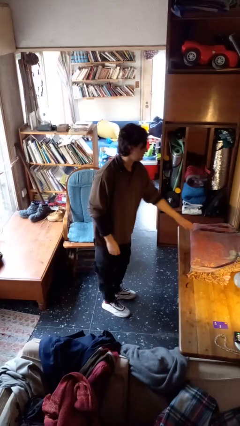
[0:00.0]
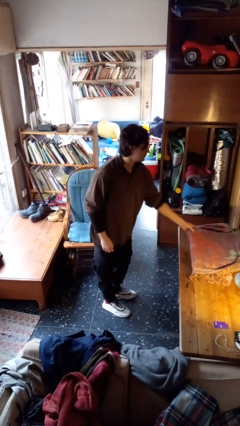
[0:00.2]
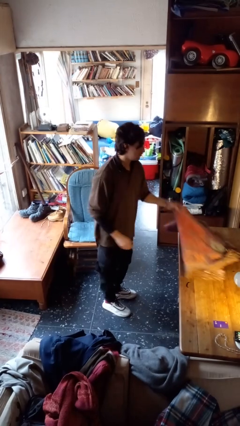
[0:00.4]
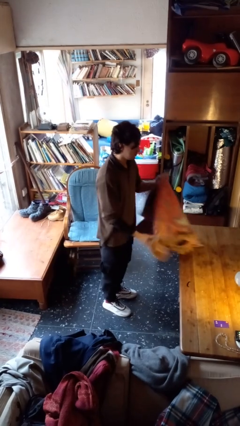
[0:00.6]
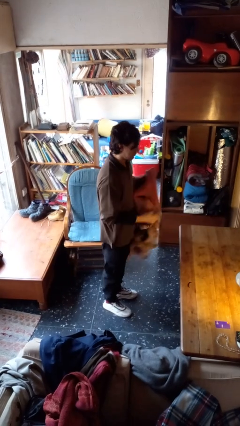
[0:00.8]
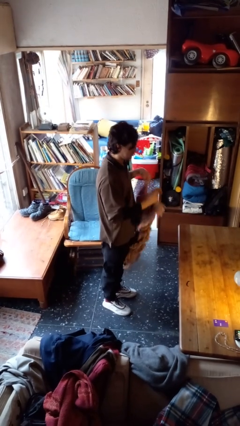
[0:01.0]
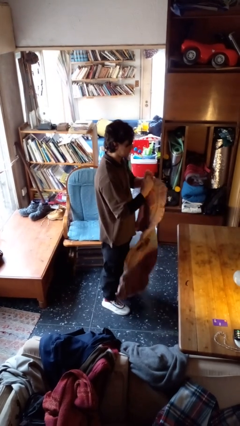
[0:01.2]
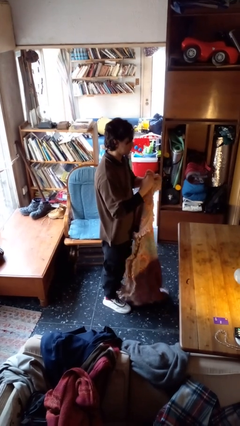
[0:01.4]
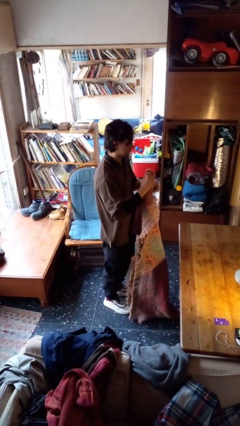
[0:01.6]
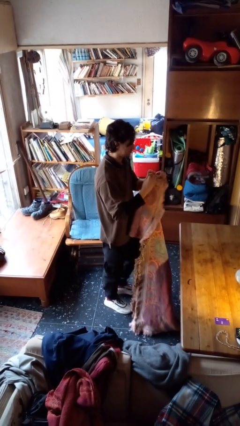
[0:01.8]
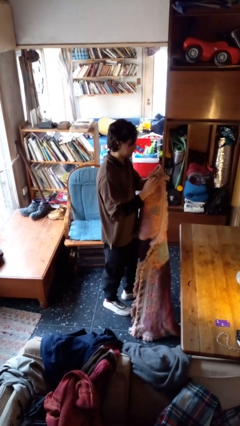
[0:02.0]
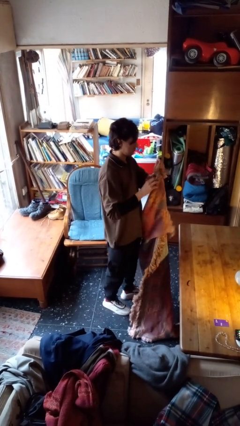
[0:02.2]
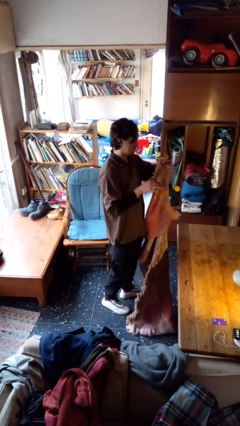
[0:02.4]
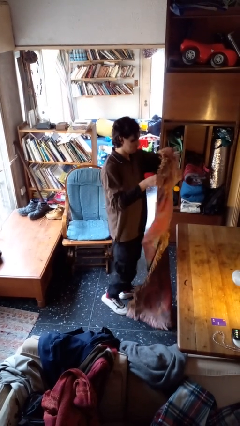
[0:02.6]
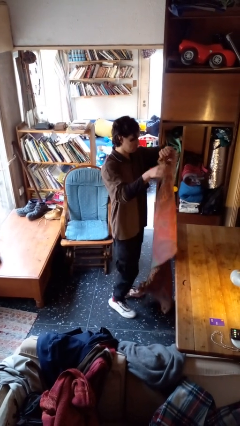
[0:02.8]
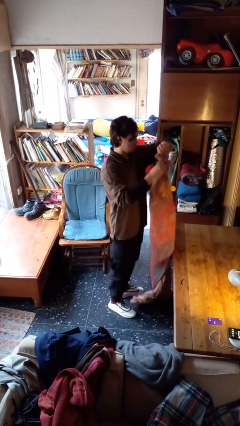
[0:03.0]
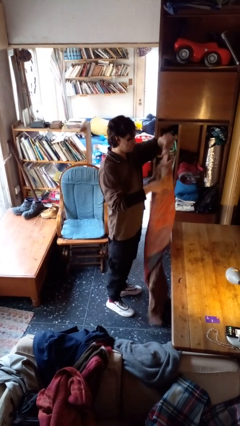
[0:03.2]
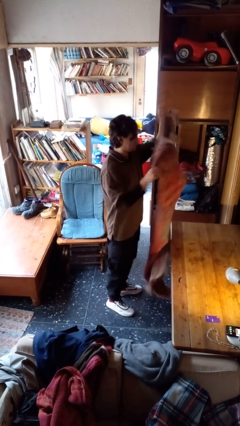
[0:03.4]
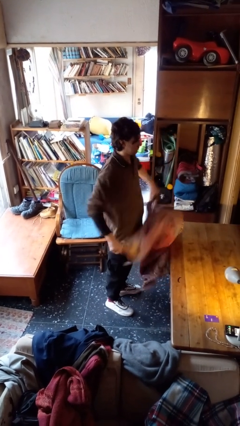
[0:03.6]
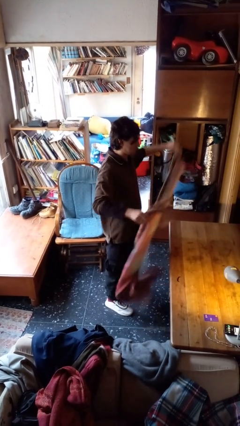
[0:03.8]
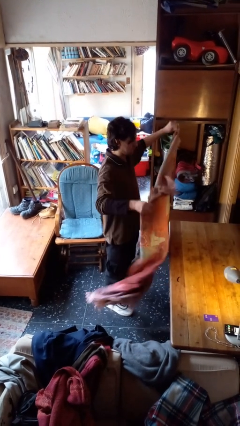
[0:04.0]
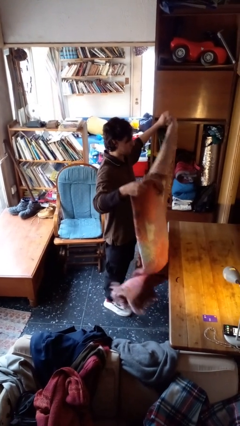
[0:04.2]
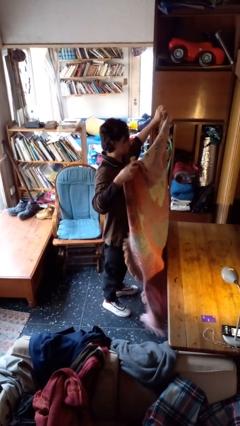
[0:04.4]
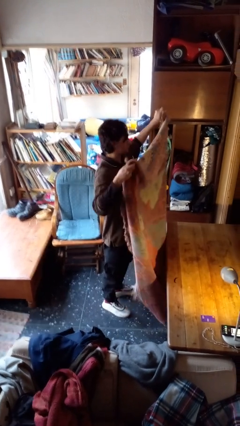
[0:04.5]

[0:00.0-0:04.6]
person unfolds blanket

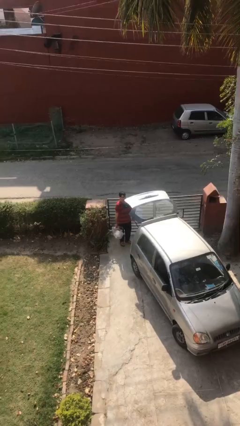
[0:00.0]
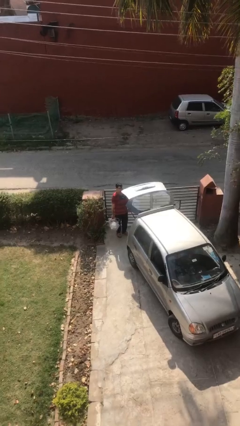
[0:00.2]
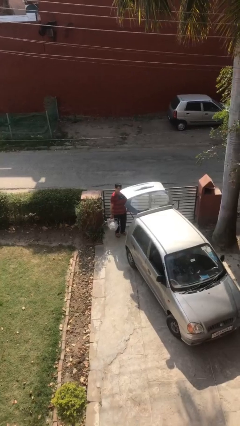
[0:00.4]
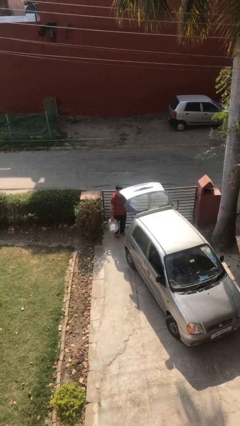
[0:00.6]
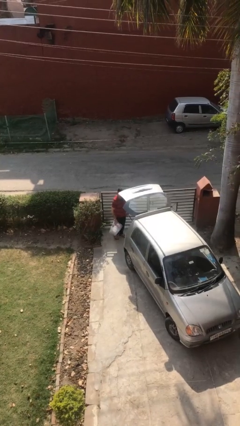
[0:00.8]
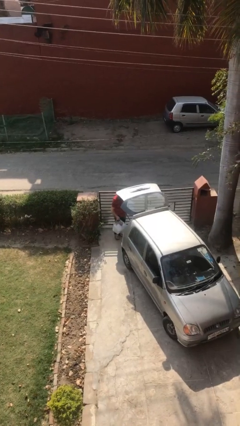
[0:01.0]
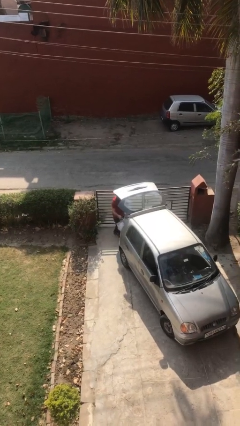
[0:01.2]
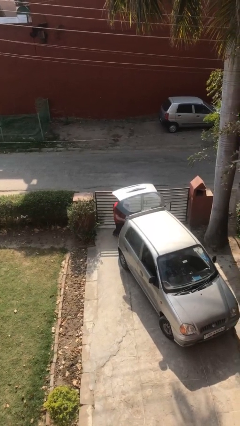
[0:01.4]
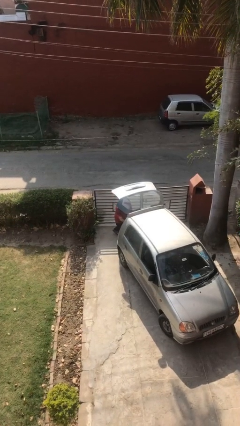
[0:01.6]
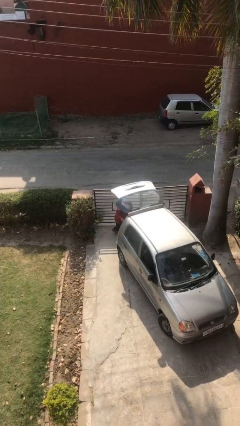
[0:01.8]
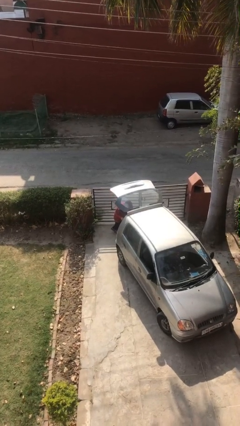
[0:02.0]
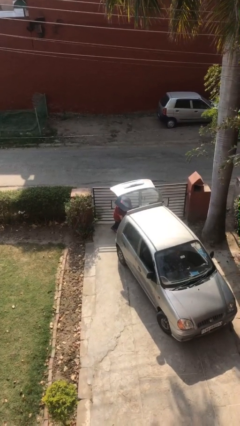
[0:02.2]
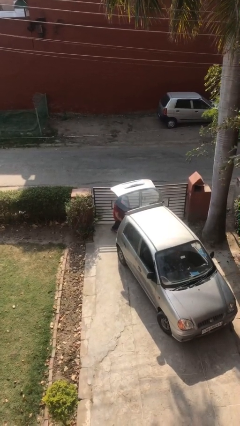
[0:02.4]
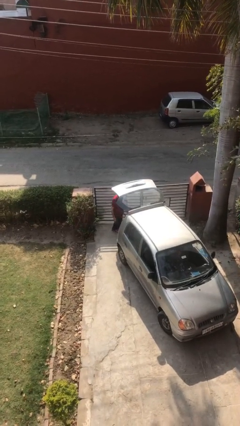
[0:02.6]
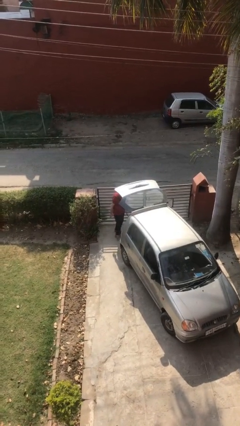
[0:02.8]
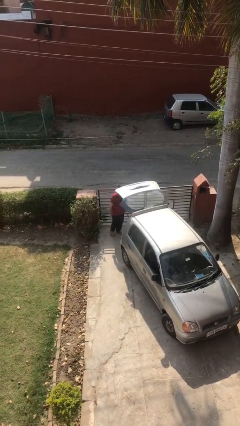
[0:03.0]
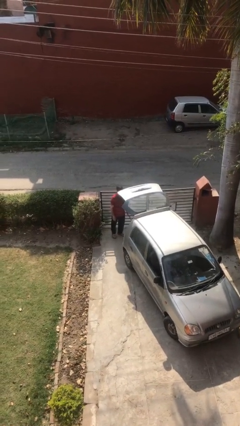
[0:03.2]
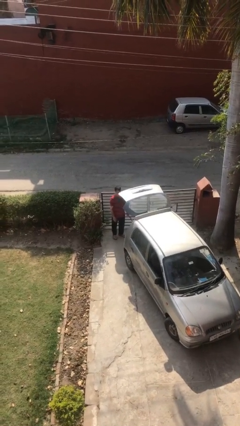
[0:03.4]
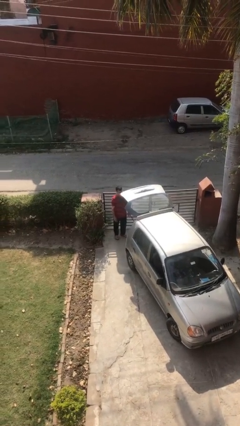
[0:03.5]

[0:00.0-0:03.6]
person loads car

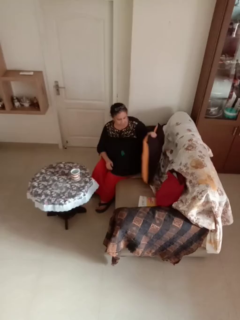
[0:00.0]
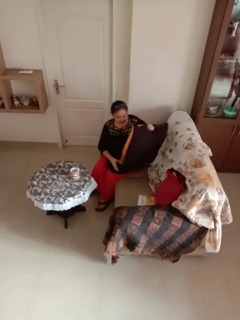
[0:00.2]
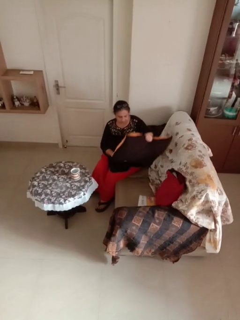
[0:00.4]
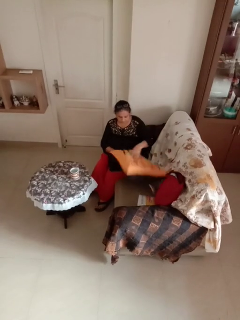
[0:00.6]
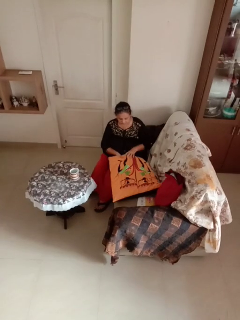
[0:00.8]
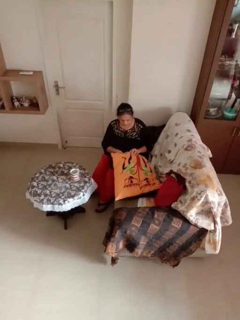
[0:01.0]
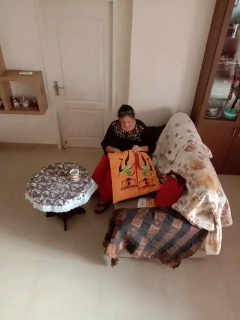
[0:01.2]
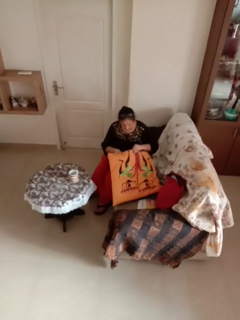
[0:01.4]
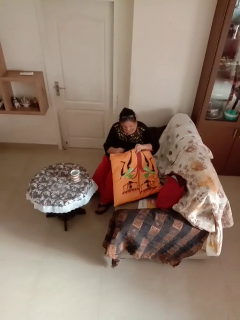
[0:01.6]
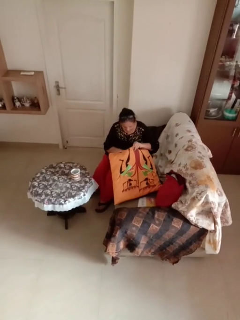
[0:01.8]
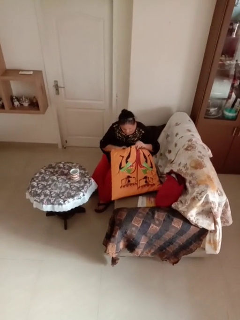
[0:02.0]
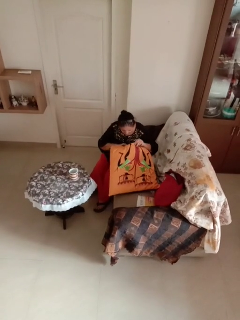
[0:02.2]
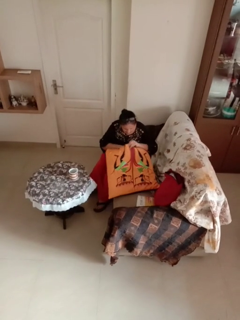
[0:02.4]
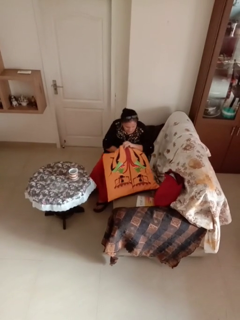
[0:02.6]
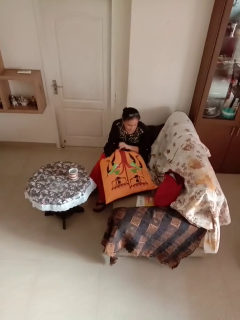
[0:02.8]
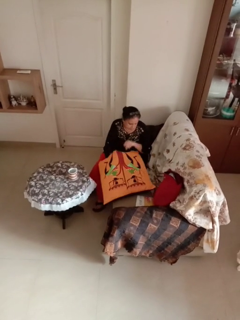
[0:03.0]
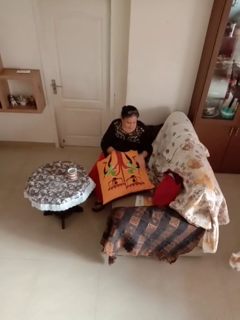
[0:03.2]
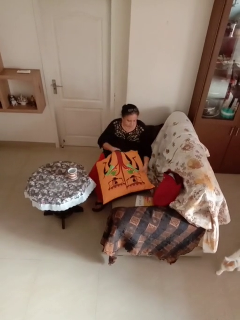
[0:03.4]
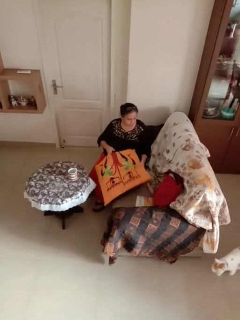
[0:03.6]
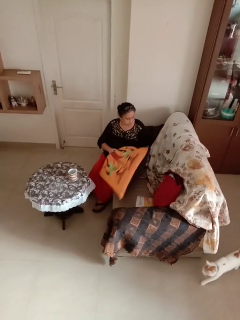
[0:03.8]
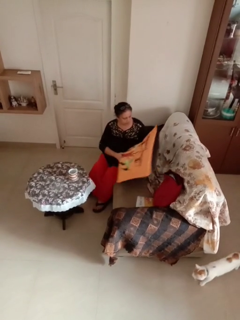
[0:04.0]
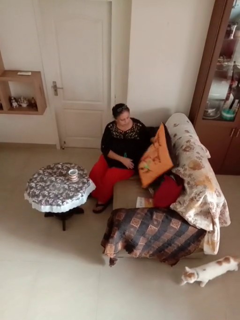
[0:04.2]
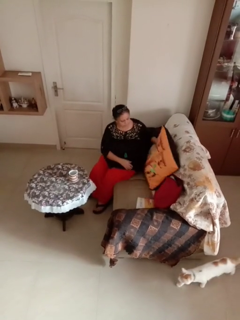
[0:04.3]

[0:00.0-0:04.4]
person searches in couch

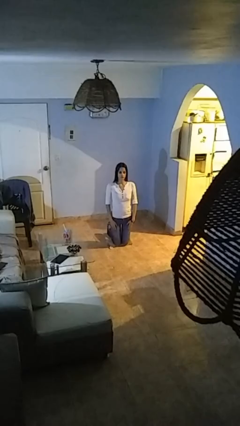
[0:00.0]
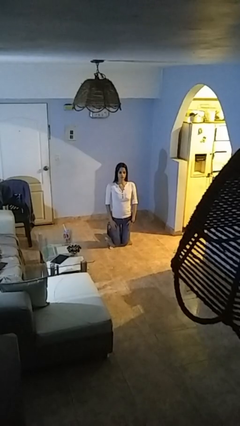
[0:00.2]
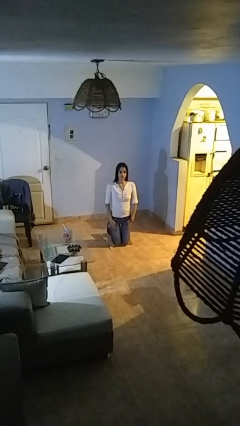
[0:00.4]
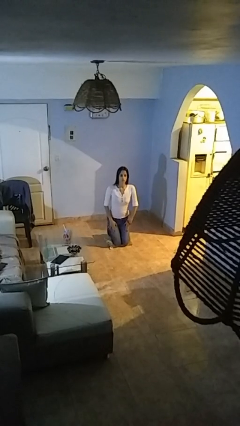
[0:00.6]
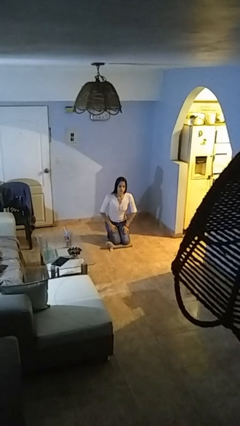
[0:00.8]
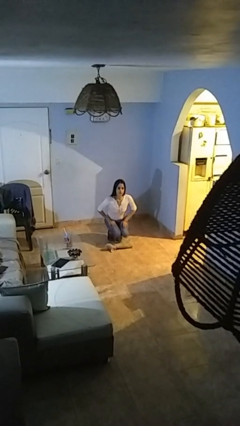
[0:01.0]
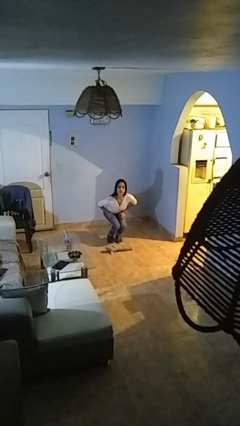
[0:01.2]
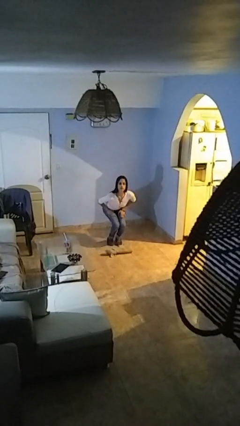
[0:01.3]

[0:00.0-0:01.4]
person stands up from floor

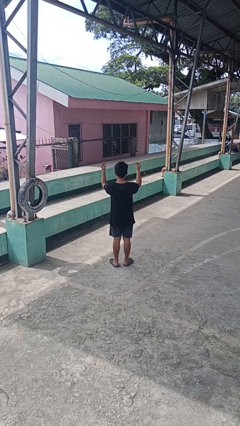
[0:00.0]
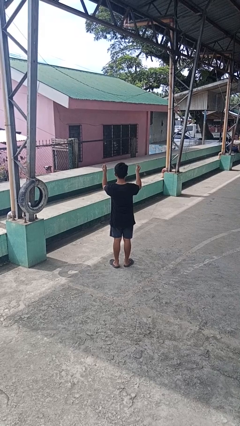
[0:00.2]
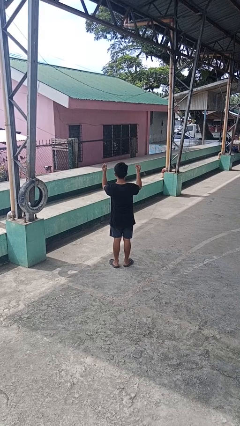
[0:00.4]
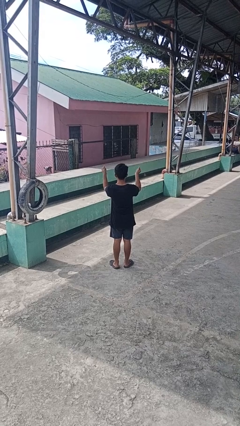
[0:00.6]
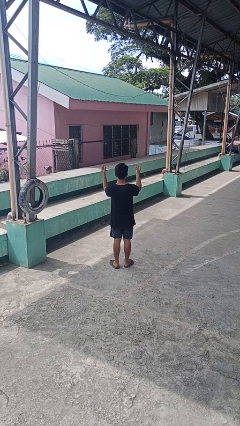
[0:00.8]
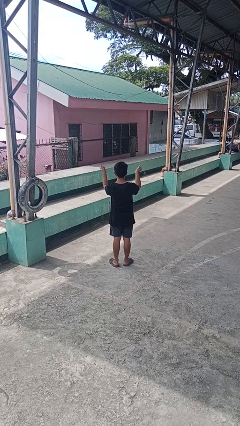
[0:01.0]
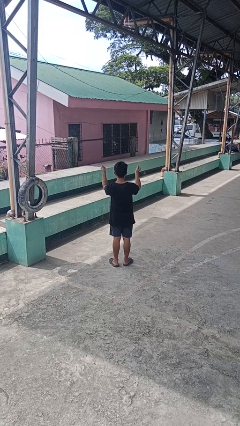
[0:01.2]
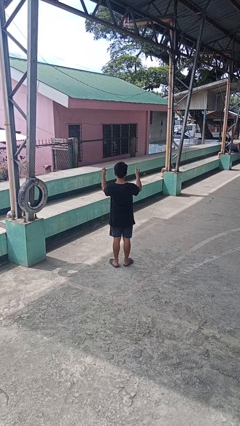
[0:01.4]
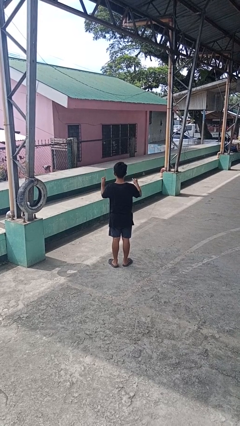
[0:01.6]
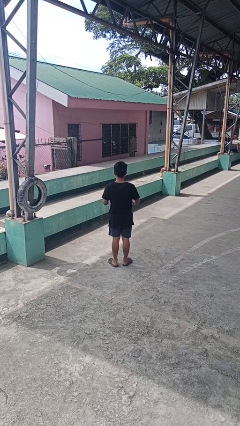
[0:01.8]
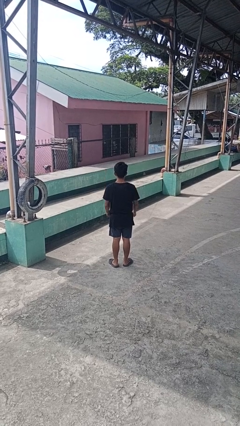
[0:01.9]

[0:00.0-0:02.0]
person snaps fingers

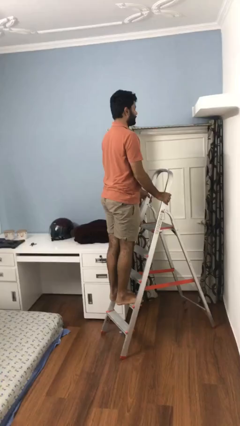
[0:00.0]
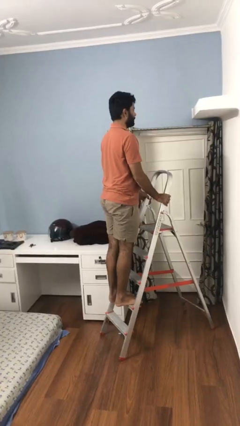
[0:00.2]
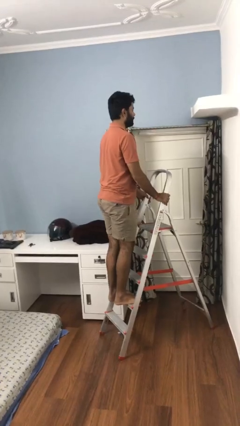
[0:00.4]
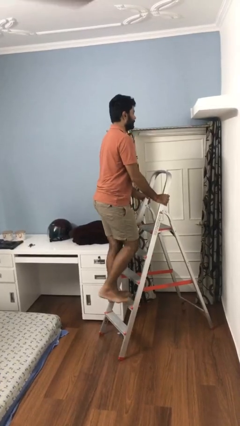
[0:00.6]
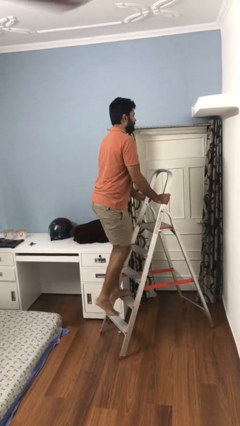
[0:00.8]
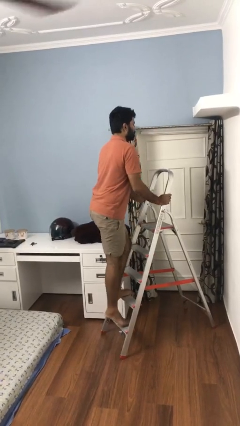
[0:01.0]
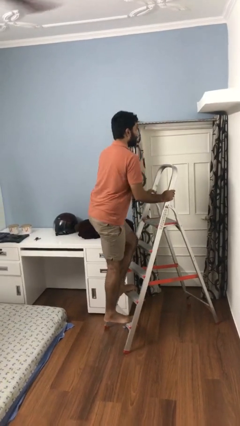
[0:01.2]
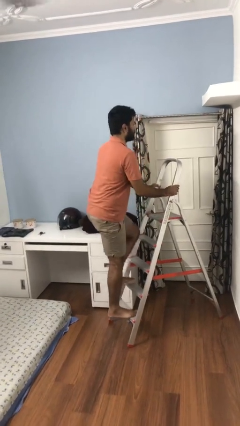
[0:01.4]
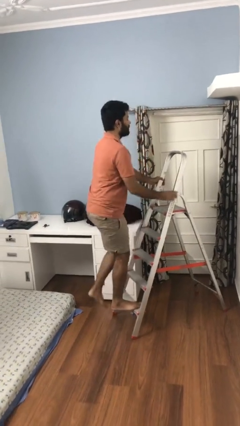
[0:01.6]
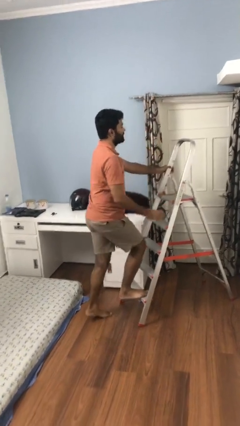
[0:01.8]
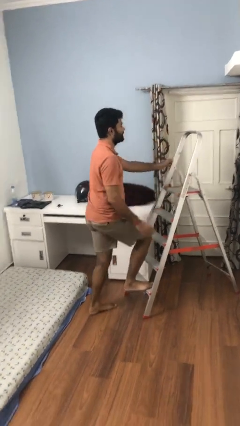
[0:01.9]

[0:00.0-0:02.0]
person climbs down ladder

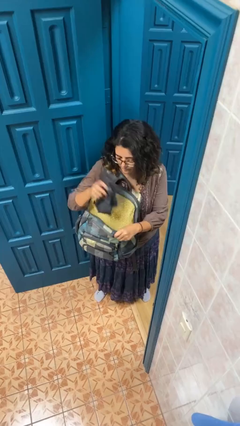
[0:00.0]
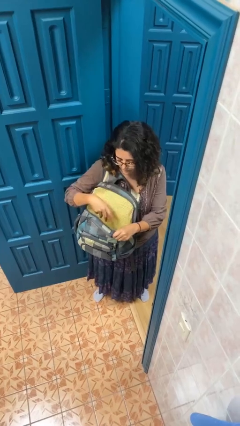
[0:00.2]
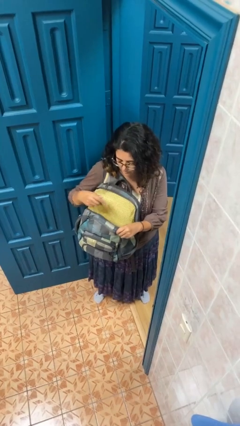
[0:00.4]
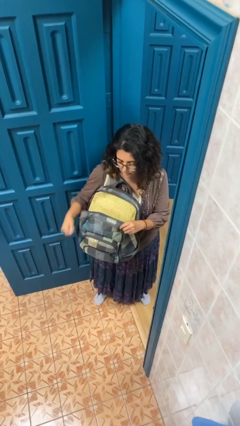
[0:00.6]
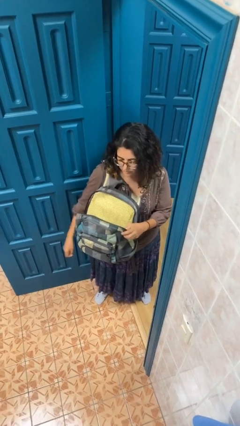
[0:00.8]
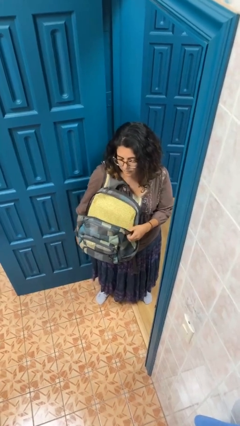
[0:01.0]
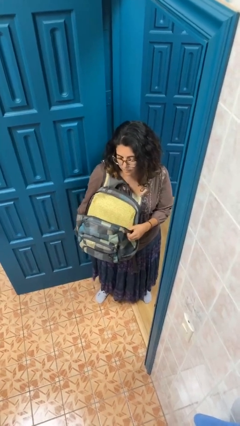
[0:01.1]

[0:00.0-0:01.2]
person puts object into backpack
